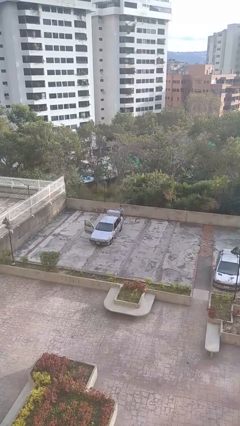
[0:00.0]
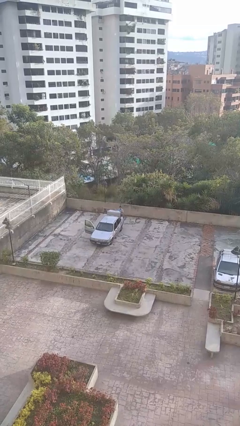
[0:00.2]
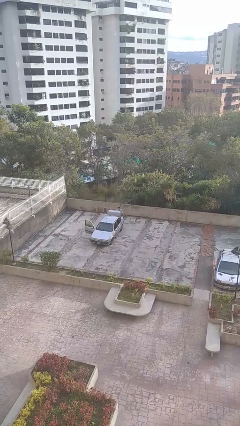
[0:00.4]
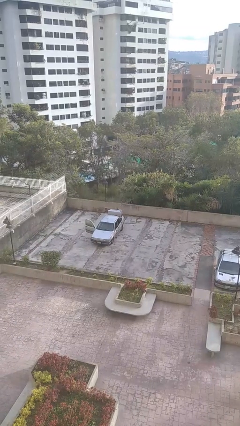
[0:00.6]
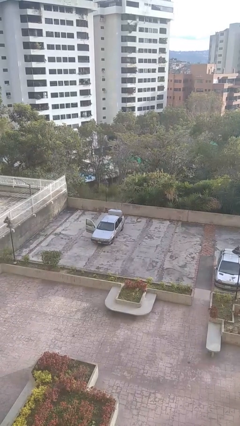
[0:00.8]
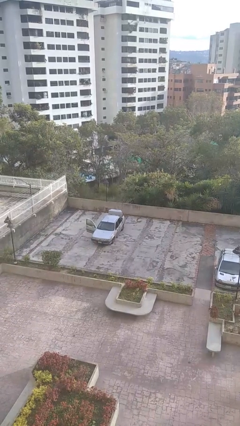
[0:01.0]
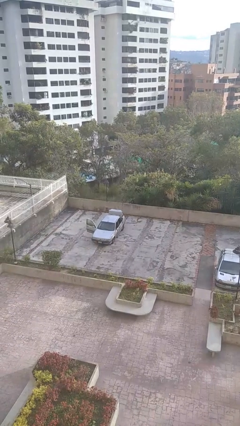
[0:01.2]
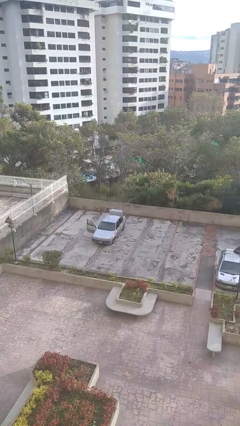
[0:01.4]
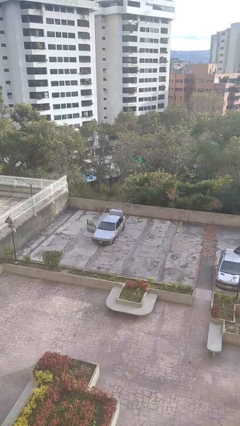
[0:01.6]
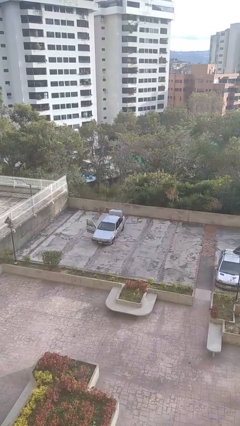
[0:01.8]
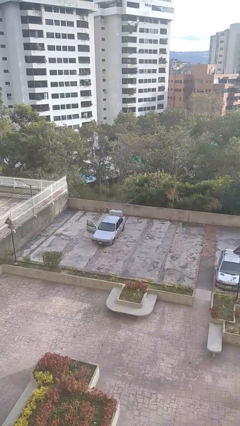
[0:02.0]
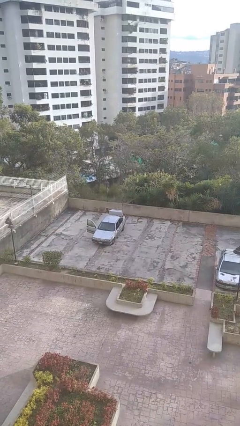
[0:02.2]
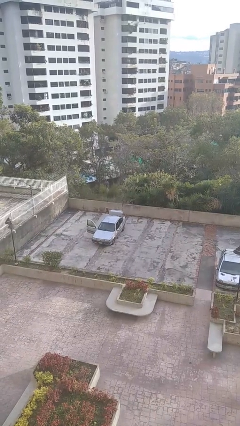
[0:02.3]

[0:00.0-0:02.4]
person loads car

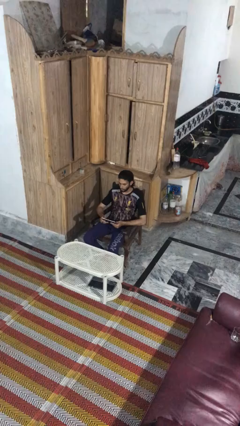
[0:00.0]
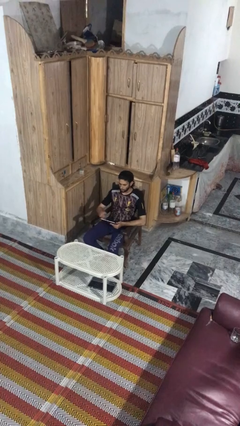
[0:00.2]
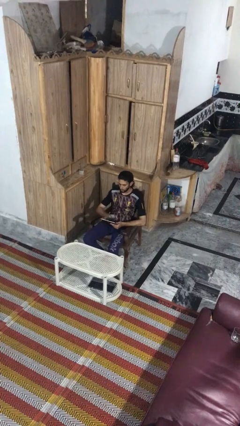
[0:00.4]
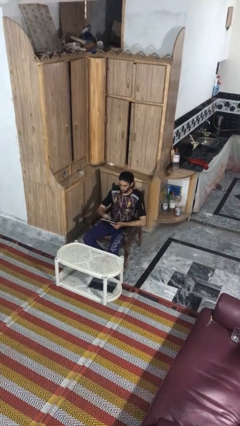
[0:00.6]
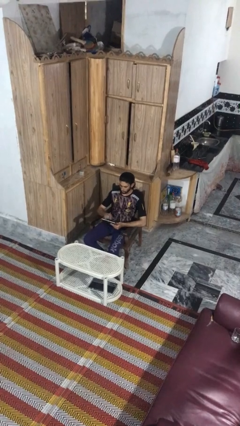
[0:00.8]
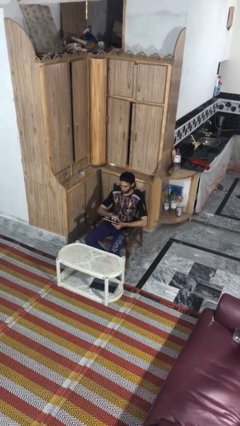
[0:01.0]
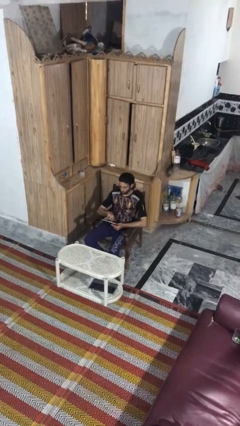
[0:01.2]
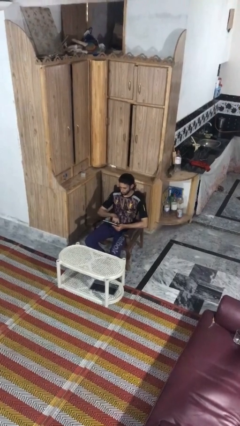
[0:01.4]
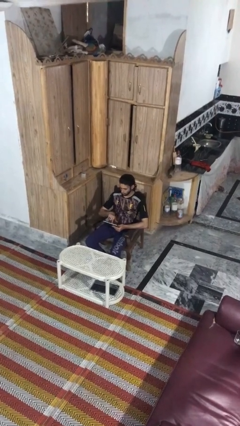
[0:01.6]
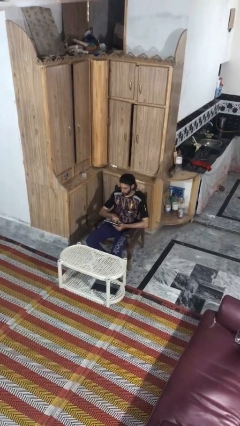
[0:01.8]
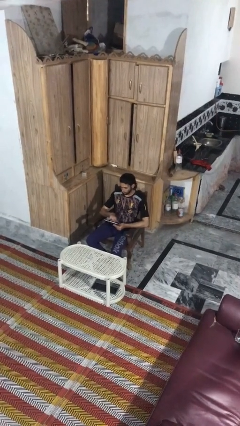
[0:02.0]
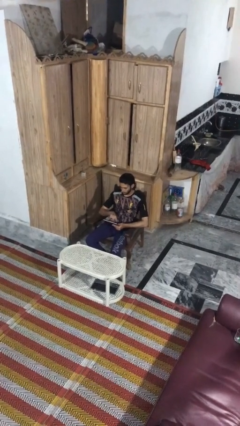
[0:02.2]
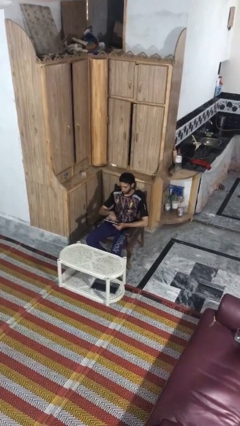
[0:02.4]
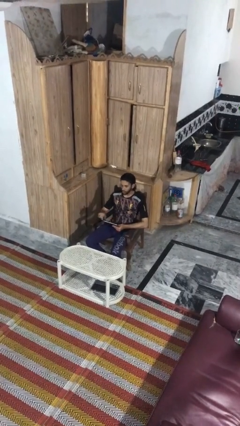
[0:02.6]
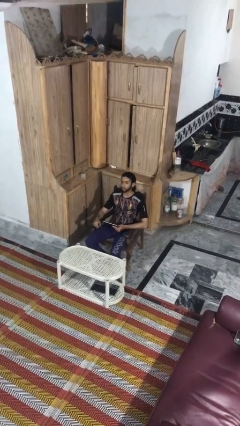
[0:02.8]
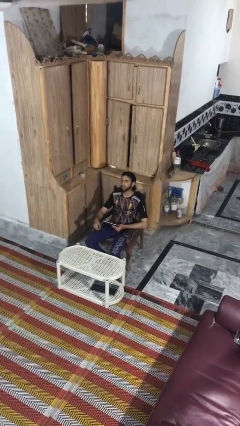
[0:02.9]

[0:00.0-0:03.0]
person interacts with tablet

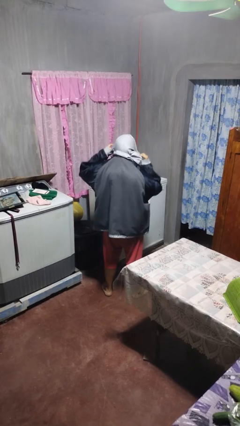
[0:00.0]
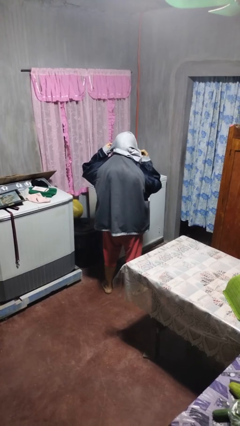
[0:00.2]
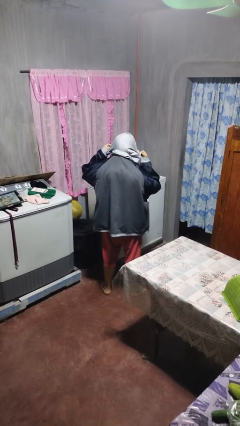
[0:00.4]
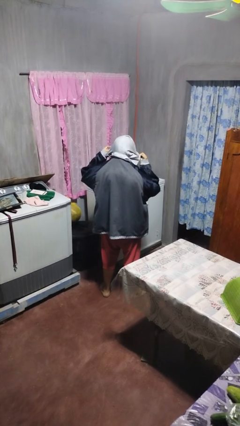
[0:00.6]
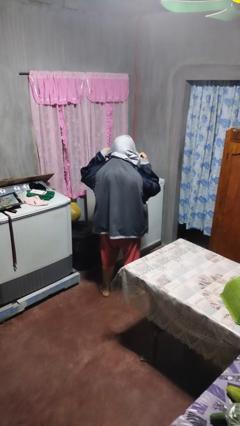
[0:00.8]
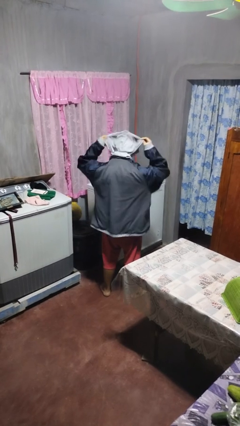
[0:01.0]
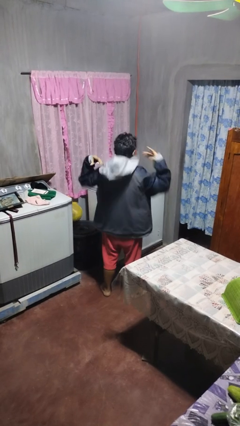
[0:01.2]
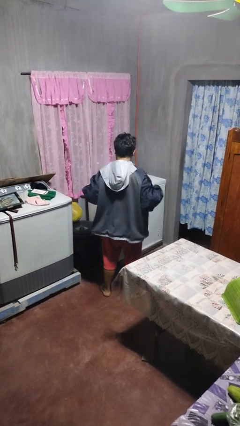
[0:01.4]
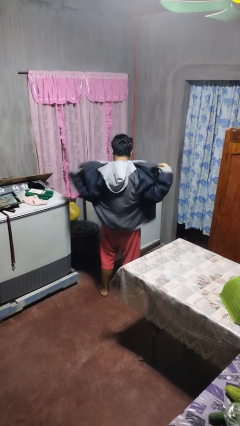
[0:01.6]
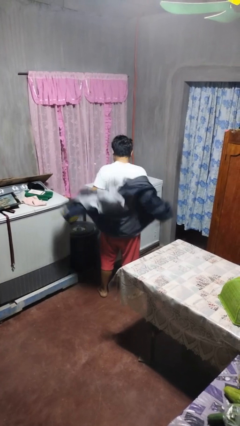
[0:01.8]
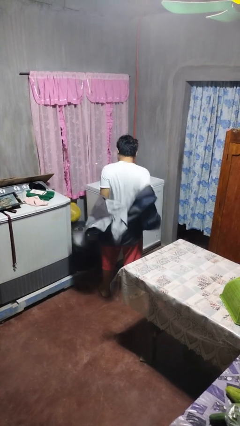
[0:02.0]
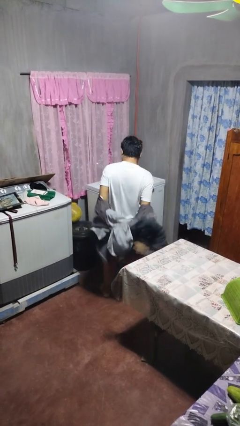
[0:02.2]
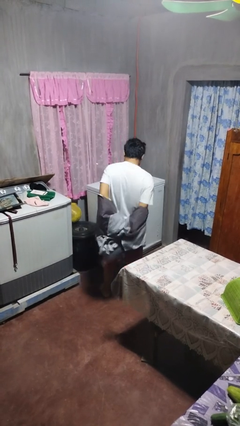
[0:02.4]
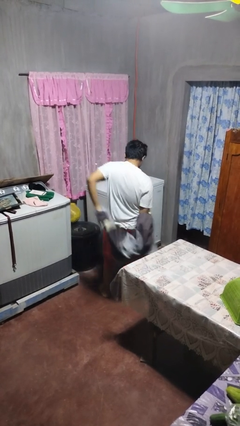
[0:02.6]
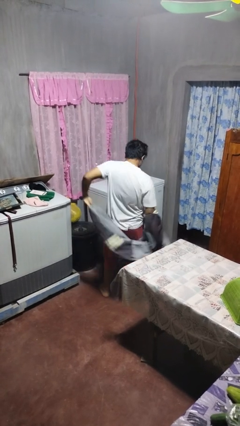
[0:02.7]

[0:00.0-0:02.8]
person takes off hoodie

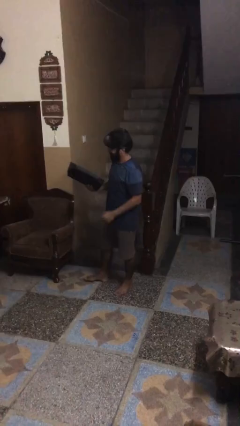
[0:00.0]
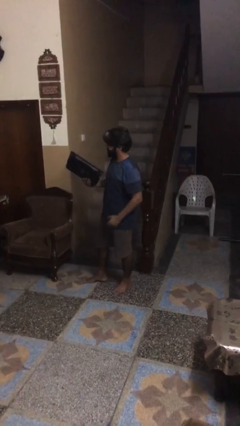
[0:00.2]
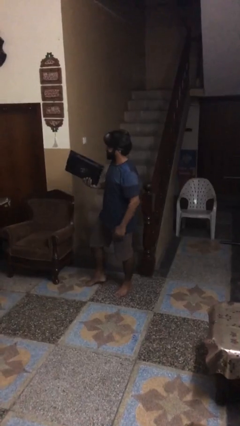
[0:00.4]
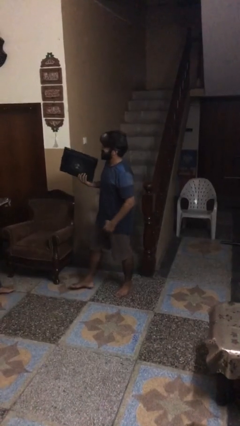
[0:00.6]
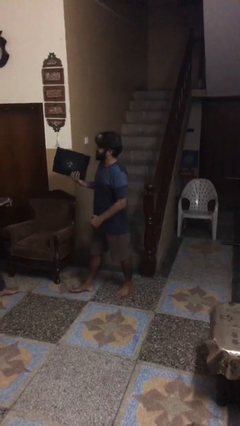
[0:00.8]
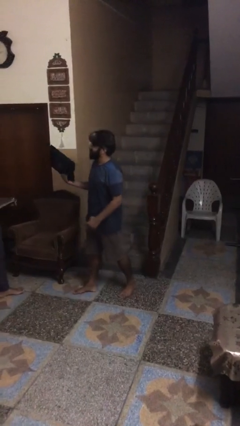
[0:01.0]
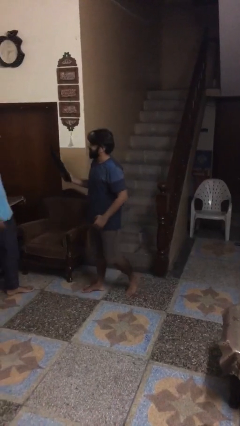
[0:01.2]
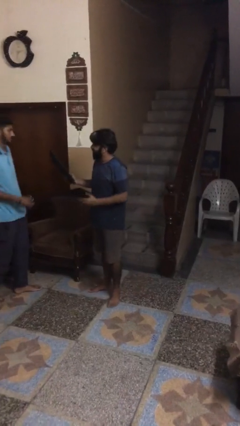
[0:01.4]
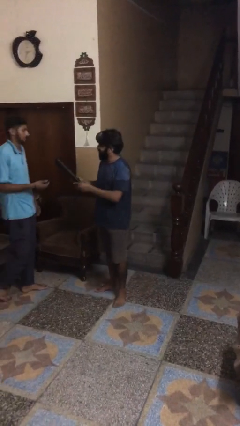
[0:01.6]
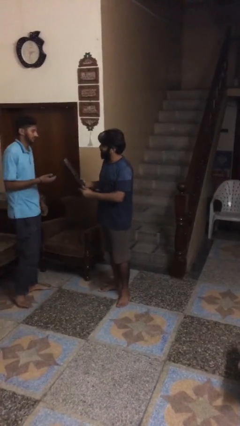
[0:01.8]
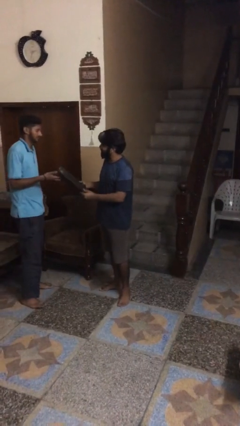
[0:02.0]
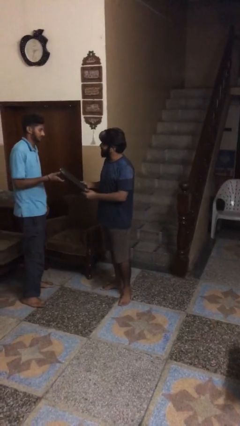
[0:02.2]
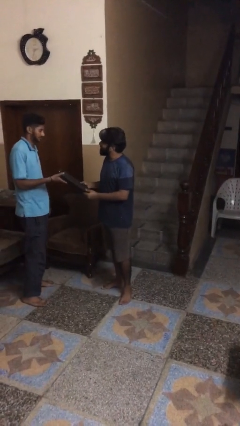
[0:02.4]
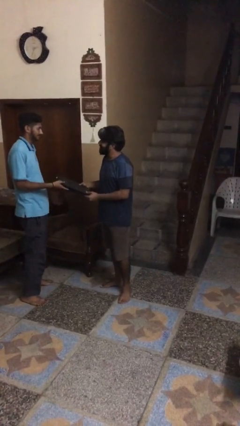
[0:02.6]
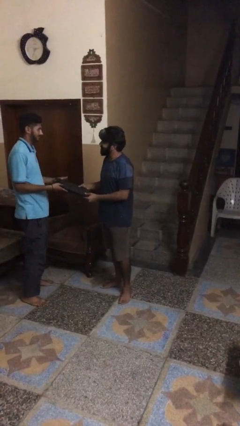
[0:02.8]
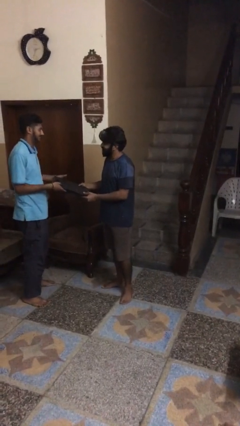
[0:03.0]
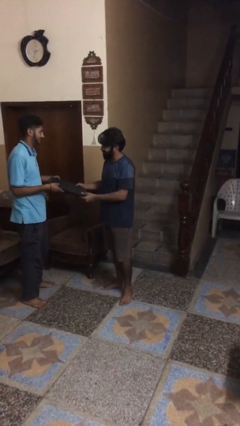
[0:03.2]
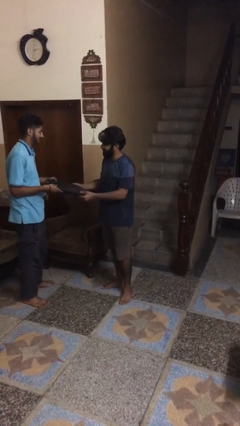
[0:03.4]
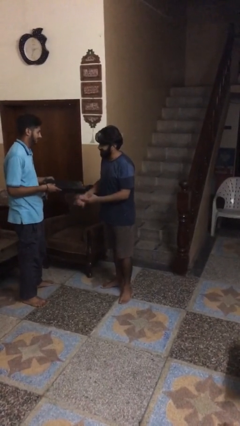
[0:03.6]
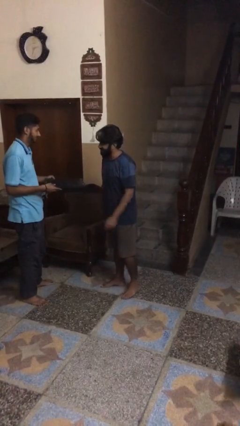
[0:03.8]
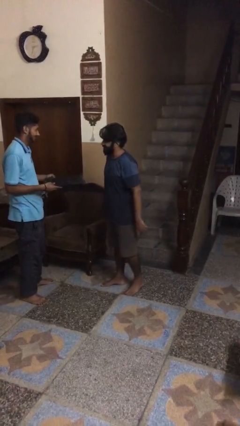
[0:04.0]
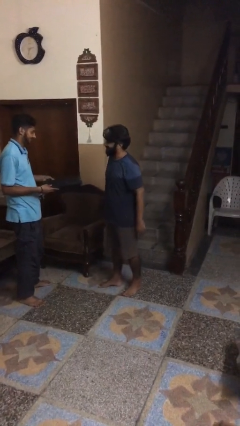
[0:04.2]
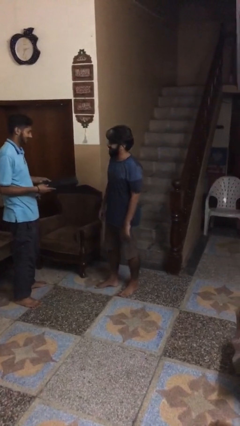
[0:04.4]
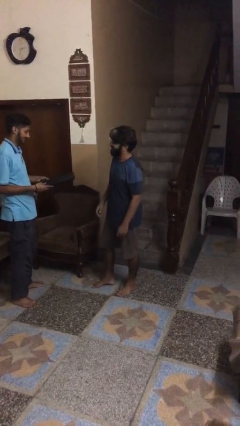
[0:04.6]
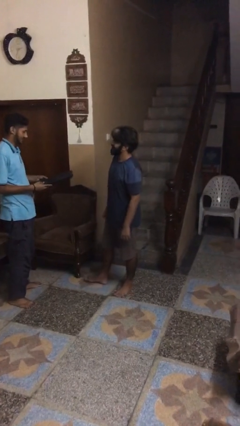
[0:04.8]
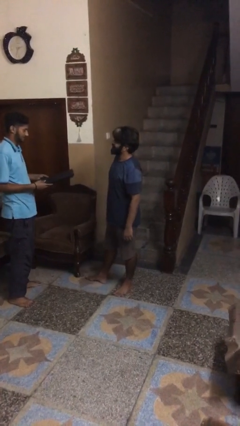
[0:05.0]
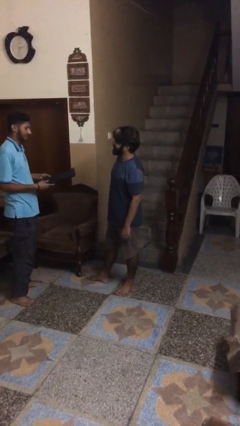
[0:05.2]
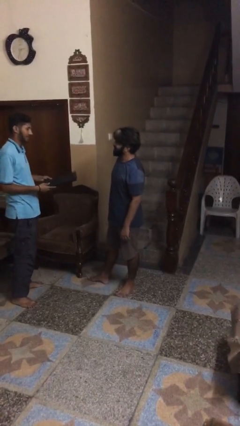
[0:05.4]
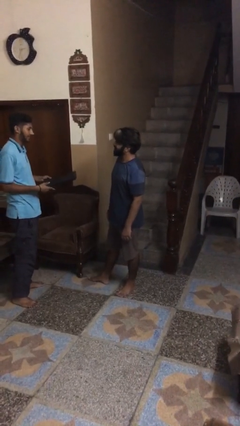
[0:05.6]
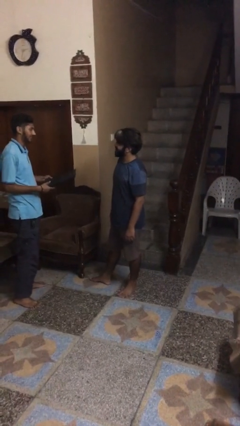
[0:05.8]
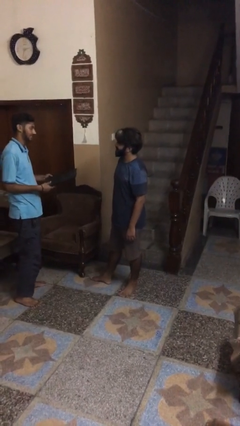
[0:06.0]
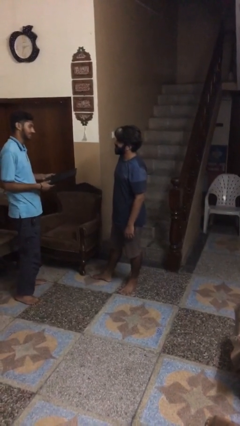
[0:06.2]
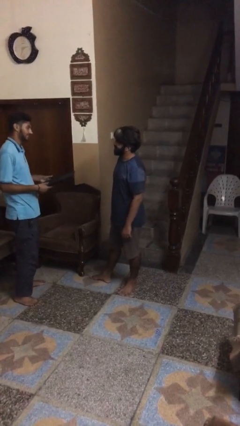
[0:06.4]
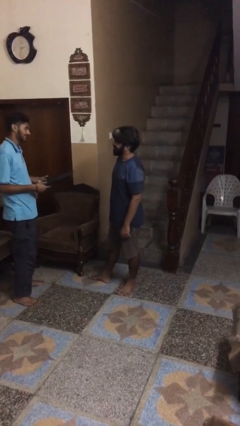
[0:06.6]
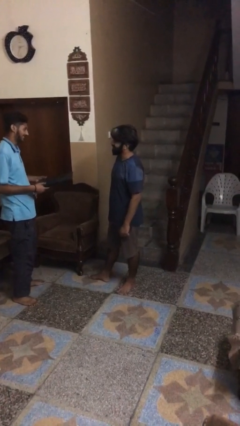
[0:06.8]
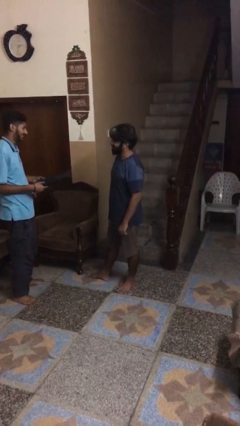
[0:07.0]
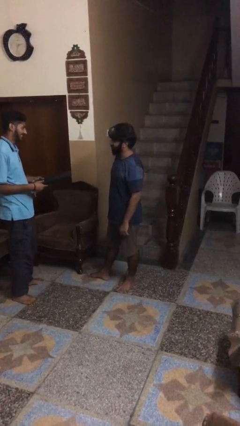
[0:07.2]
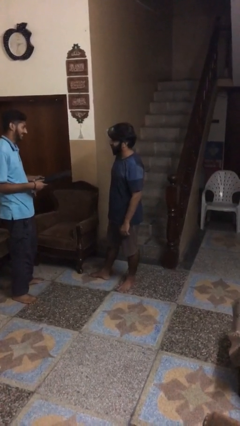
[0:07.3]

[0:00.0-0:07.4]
person transfers object to person

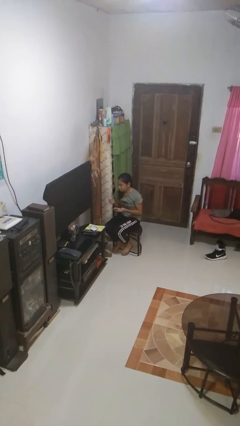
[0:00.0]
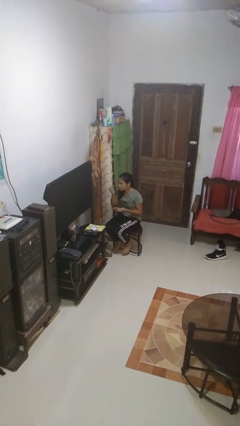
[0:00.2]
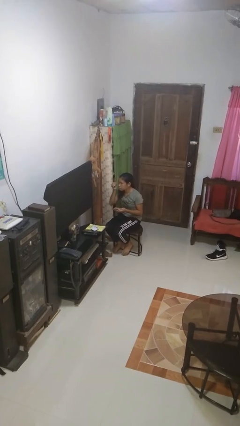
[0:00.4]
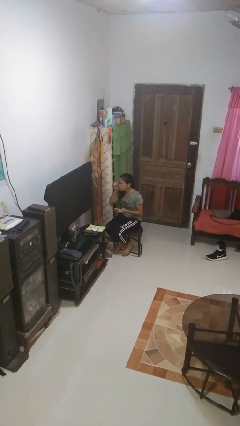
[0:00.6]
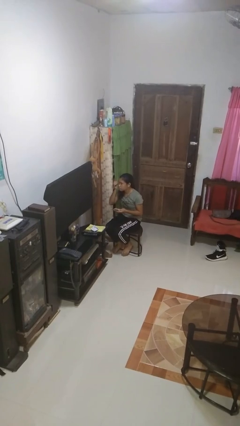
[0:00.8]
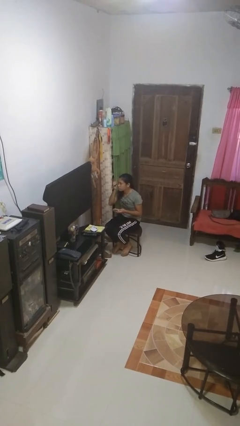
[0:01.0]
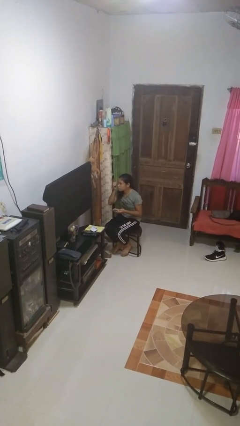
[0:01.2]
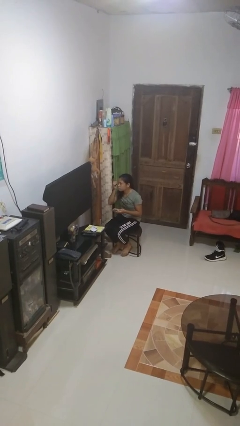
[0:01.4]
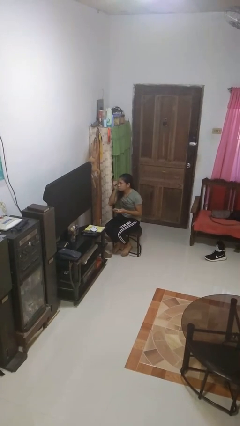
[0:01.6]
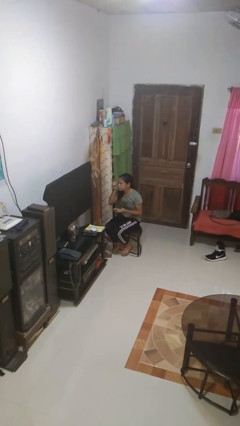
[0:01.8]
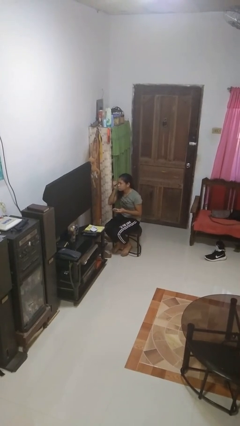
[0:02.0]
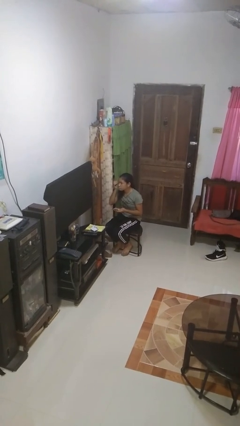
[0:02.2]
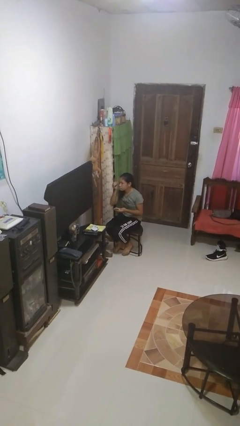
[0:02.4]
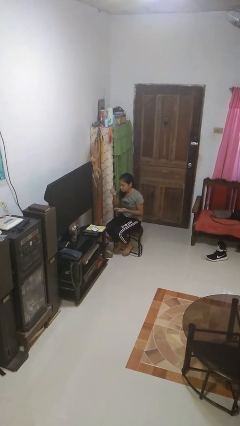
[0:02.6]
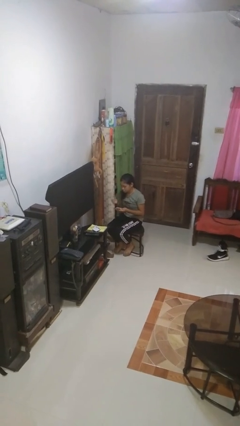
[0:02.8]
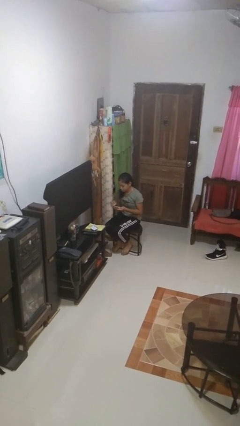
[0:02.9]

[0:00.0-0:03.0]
person applies eye makeup
